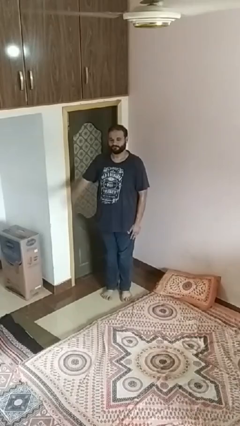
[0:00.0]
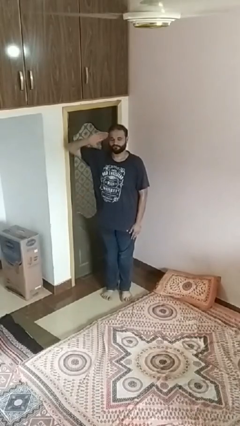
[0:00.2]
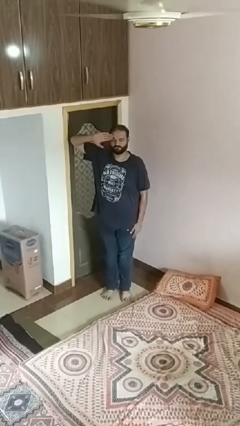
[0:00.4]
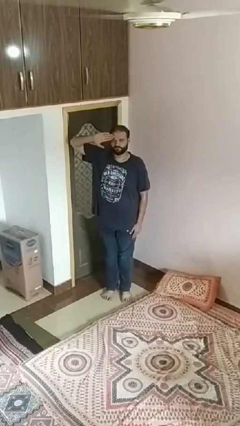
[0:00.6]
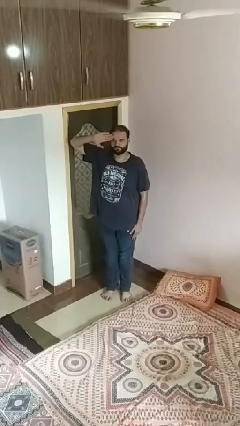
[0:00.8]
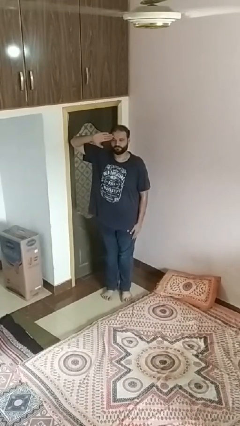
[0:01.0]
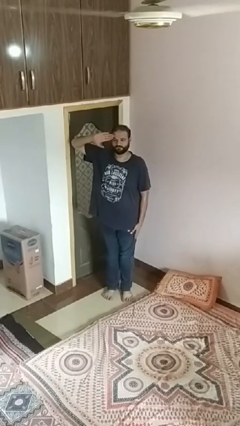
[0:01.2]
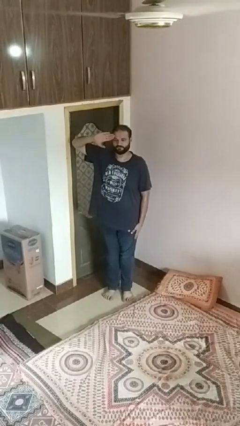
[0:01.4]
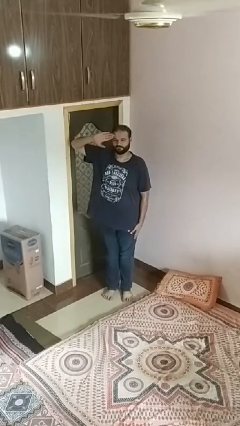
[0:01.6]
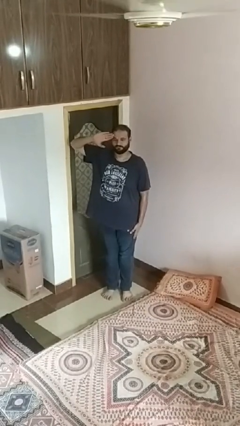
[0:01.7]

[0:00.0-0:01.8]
person salutes

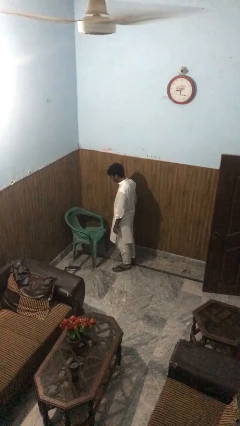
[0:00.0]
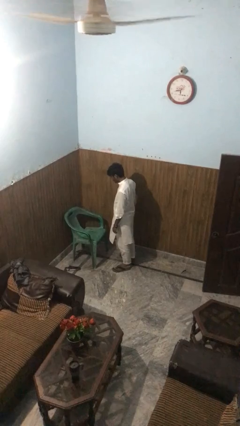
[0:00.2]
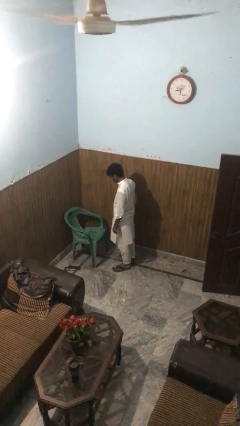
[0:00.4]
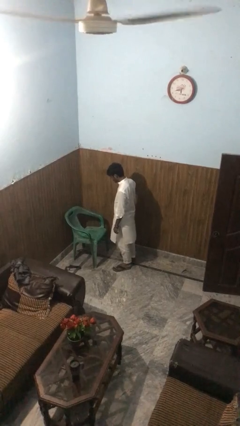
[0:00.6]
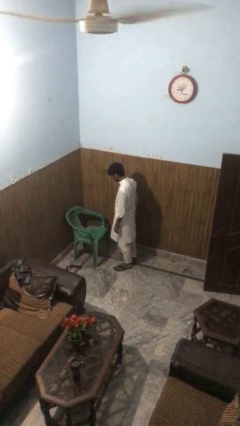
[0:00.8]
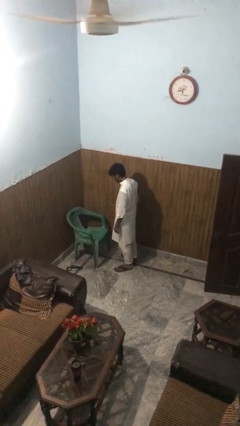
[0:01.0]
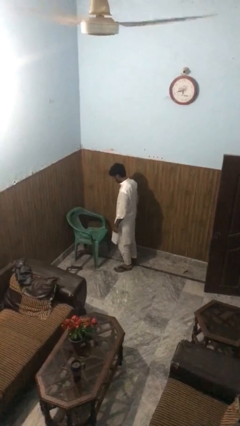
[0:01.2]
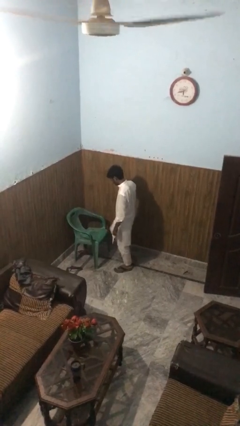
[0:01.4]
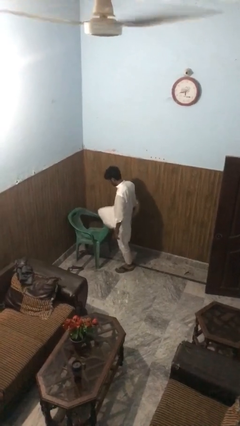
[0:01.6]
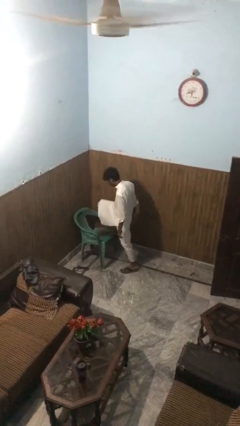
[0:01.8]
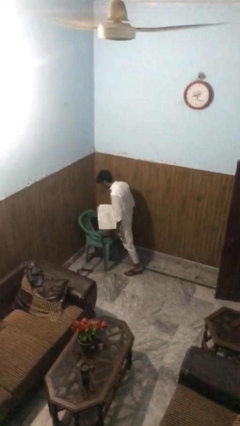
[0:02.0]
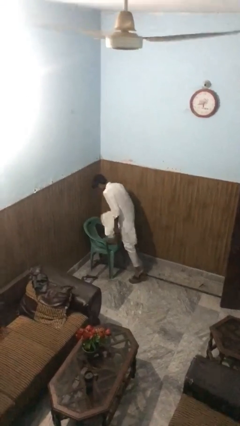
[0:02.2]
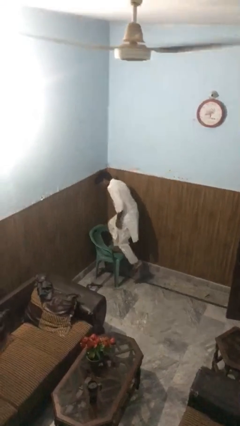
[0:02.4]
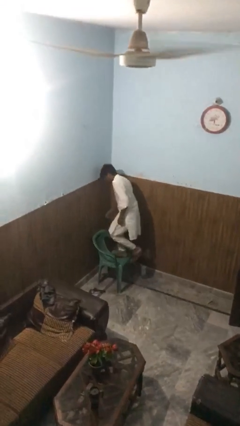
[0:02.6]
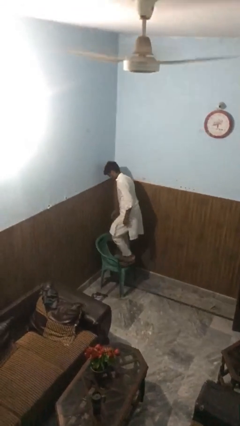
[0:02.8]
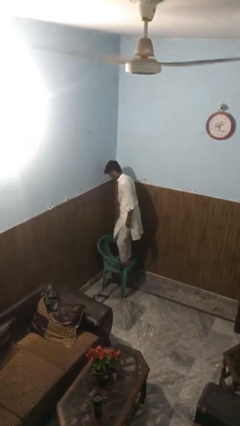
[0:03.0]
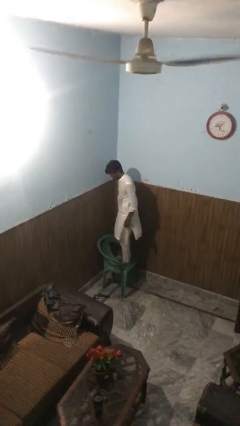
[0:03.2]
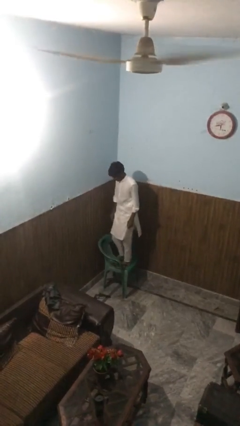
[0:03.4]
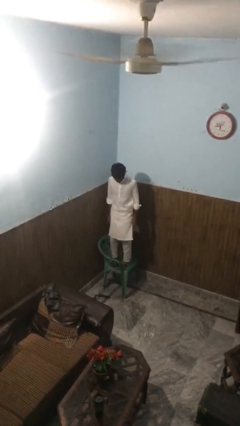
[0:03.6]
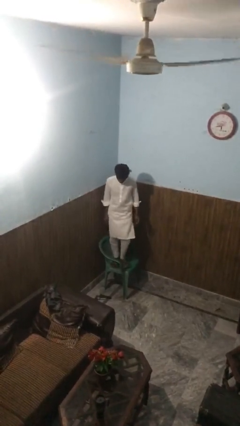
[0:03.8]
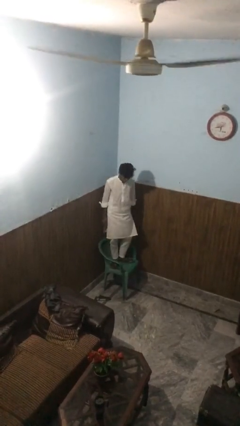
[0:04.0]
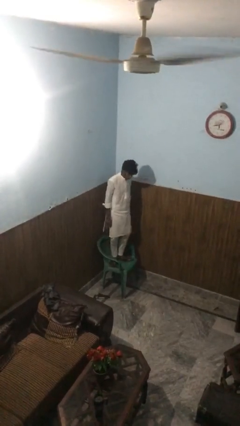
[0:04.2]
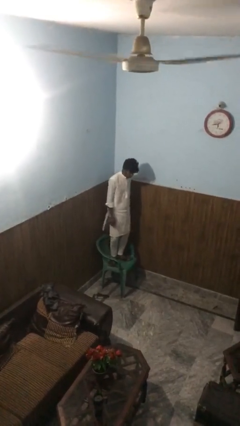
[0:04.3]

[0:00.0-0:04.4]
person climbs on chair

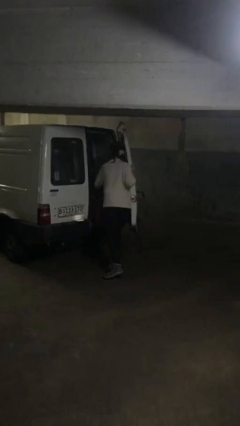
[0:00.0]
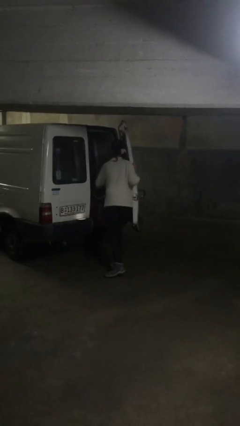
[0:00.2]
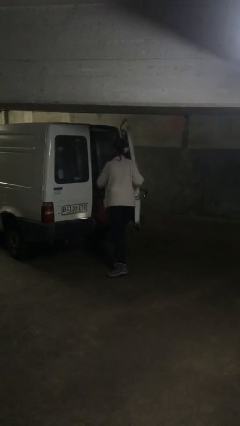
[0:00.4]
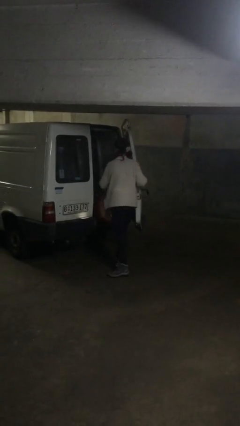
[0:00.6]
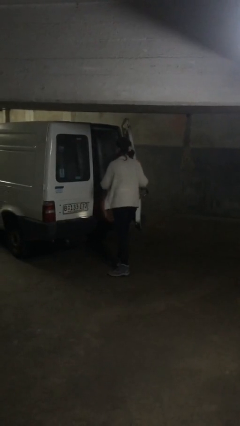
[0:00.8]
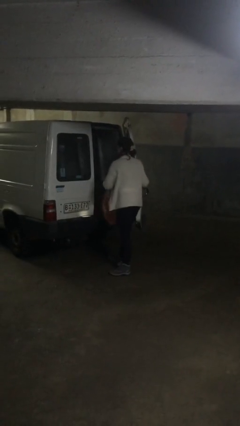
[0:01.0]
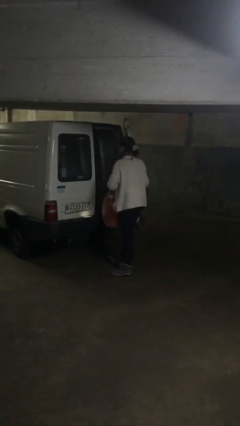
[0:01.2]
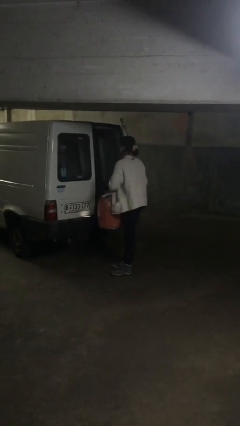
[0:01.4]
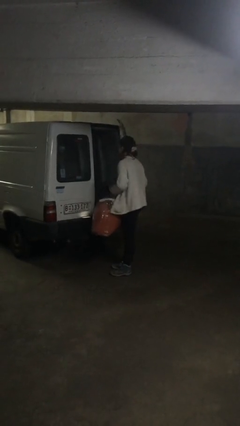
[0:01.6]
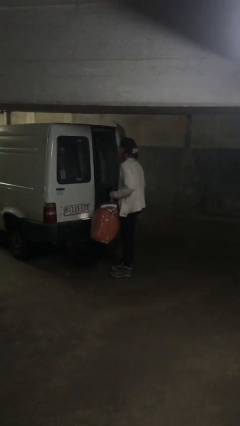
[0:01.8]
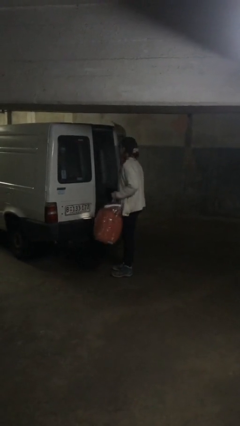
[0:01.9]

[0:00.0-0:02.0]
person unloads car

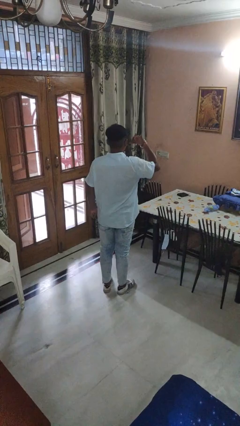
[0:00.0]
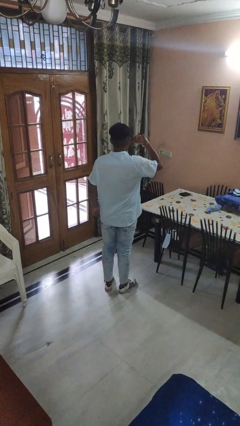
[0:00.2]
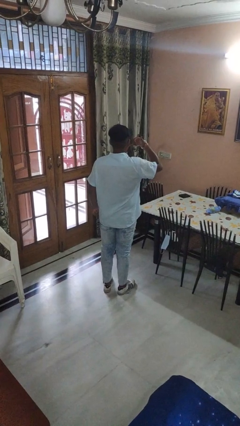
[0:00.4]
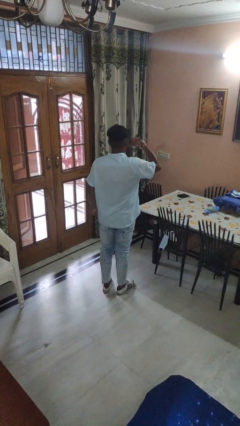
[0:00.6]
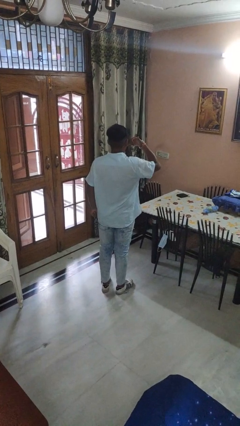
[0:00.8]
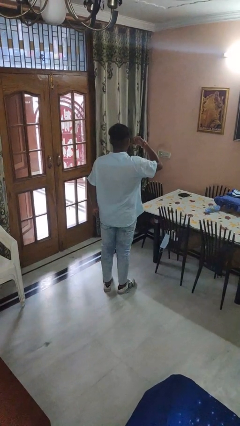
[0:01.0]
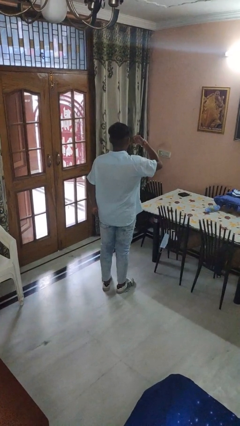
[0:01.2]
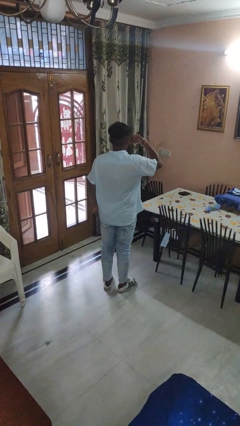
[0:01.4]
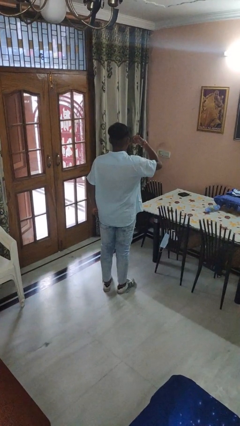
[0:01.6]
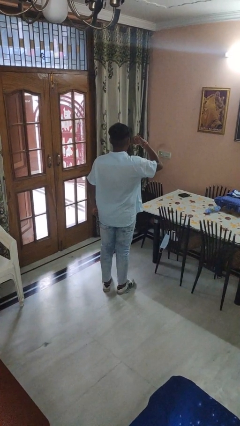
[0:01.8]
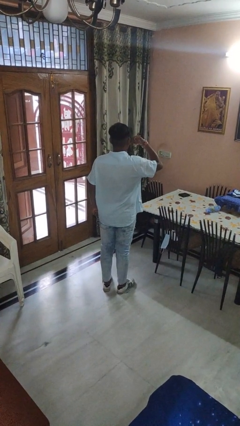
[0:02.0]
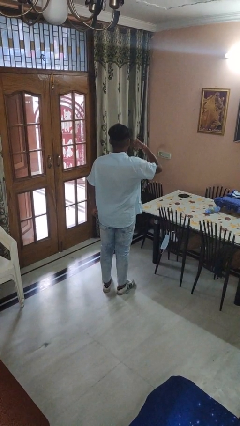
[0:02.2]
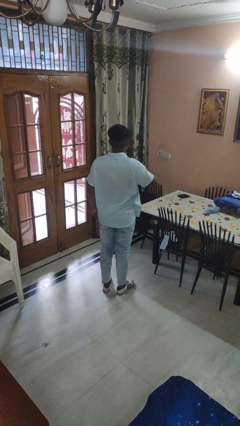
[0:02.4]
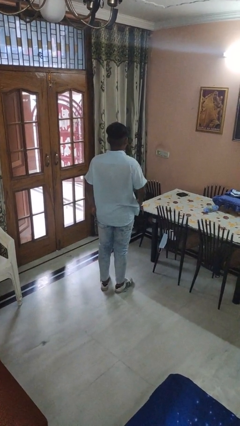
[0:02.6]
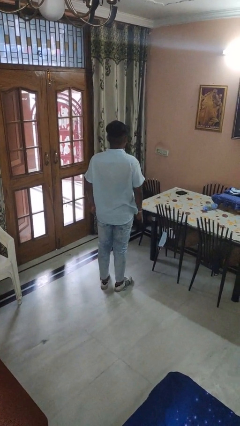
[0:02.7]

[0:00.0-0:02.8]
person gestures call me

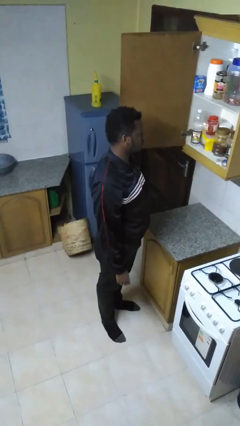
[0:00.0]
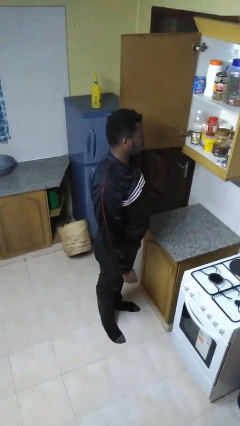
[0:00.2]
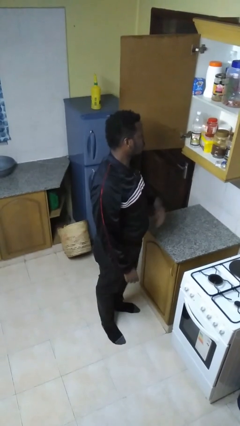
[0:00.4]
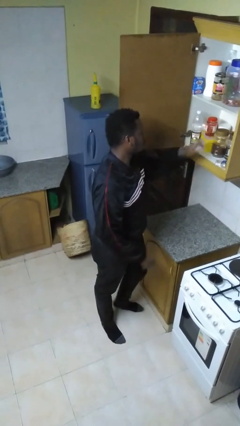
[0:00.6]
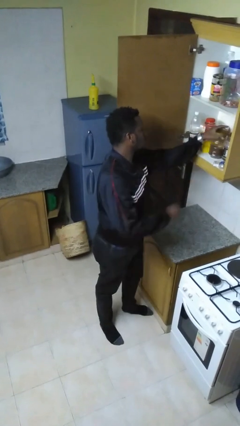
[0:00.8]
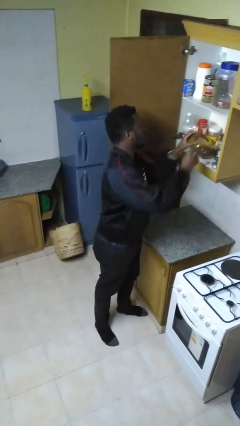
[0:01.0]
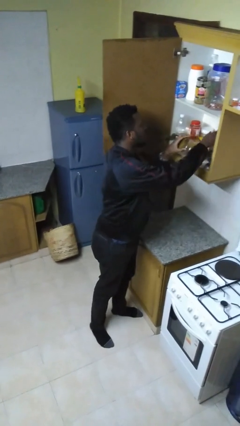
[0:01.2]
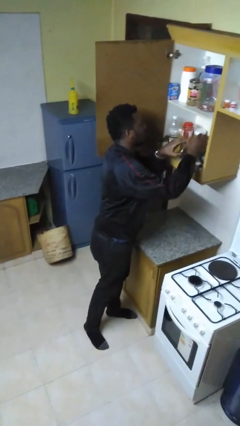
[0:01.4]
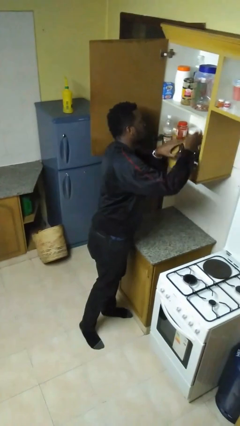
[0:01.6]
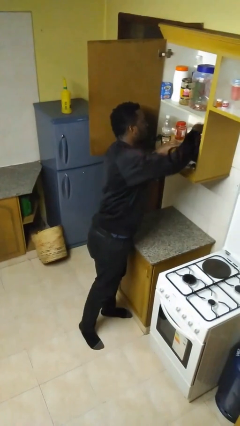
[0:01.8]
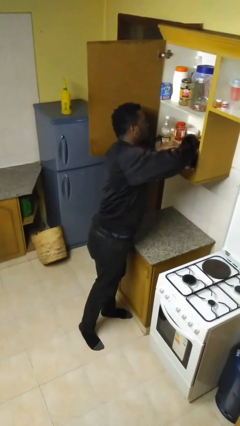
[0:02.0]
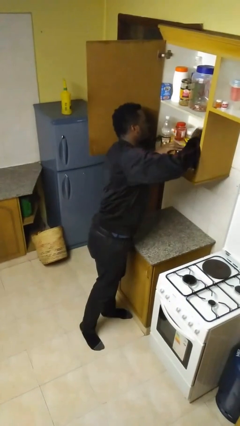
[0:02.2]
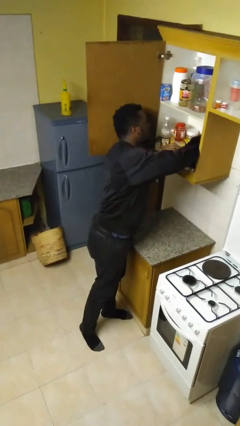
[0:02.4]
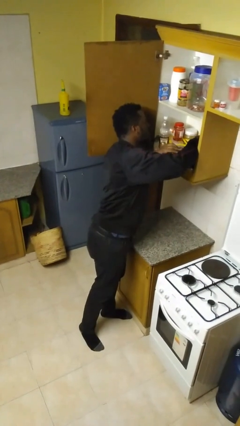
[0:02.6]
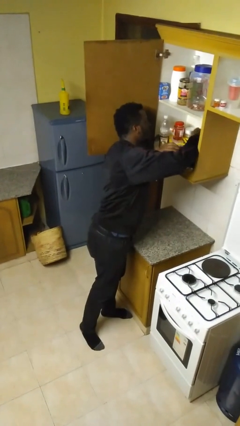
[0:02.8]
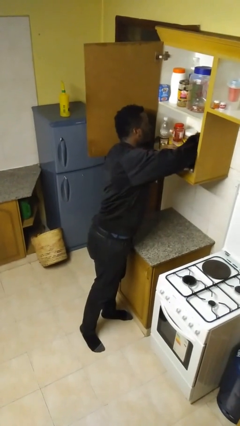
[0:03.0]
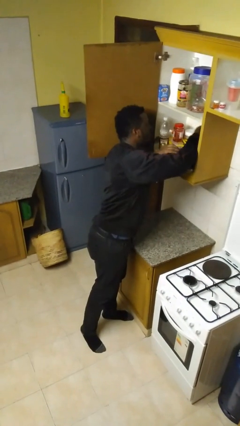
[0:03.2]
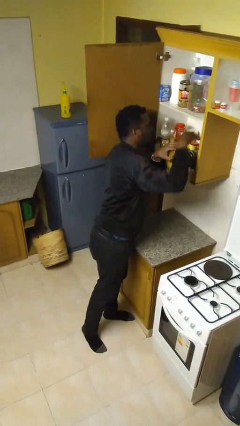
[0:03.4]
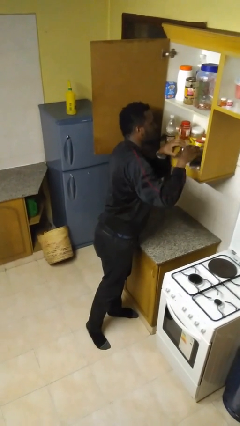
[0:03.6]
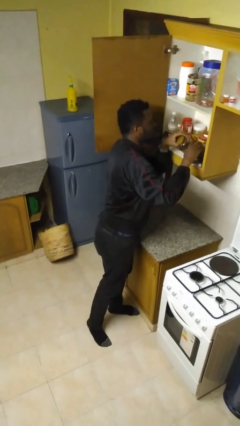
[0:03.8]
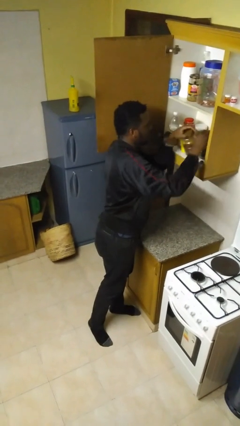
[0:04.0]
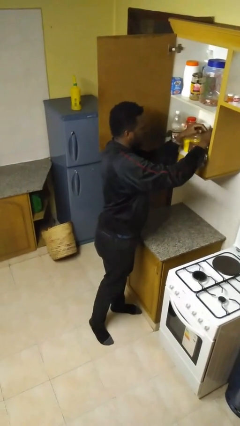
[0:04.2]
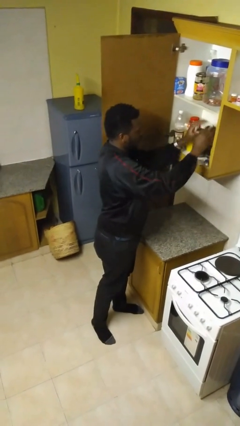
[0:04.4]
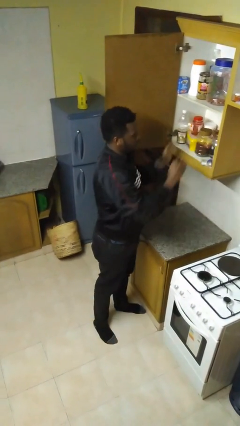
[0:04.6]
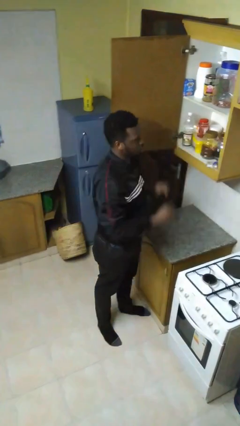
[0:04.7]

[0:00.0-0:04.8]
person searches in cabinet

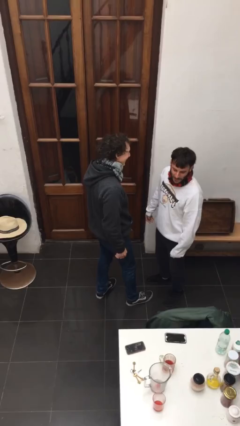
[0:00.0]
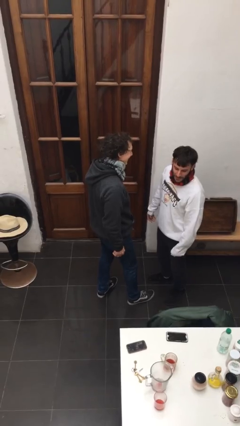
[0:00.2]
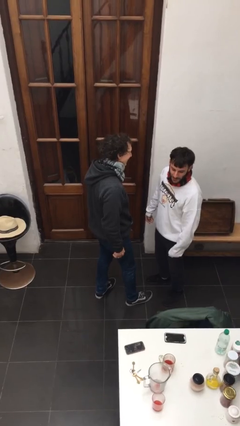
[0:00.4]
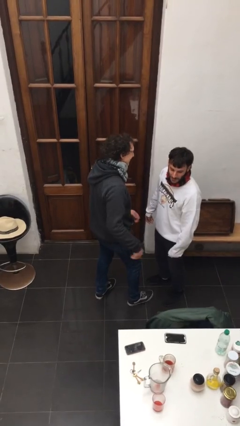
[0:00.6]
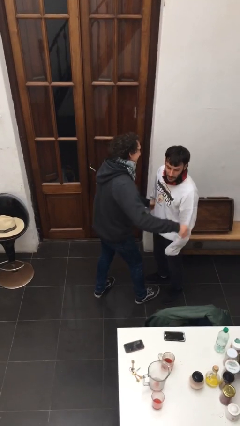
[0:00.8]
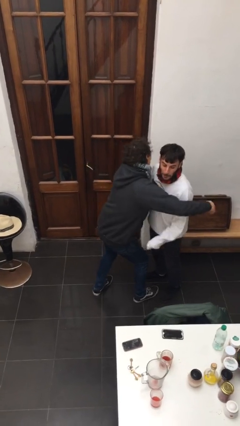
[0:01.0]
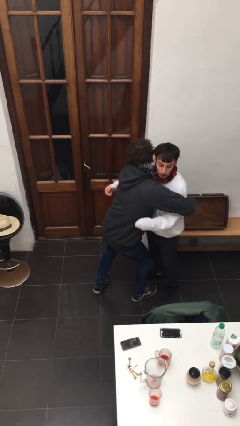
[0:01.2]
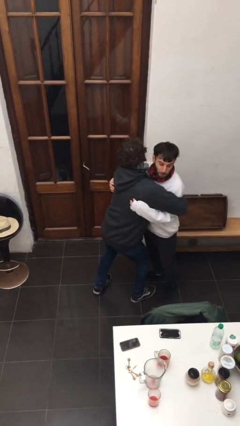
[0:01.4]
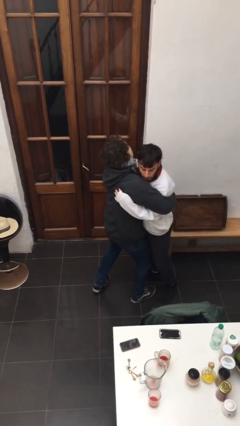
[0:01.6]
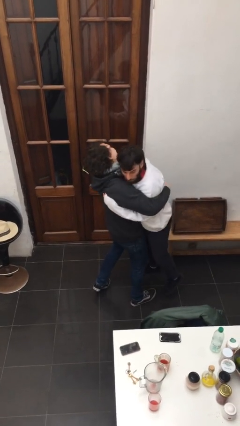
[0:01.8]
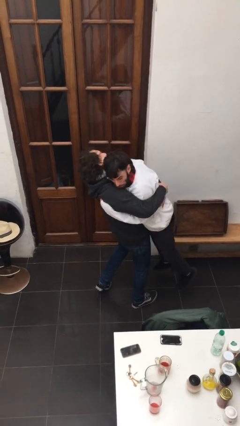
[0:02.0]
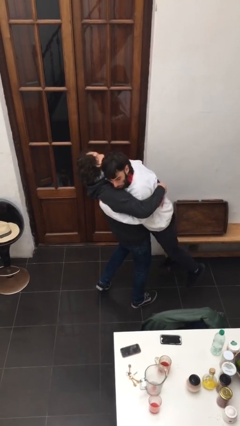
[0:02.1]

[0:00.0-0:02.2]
person picks up person
